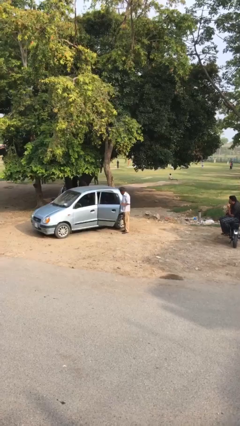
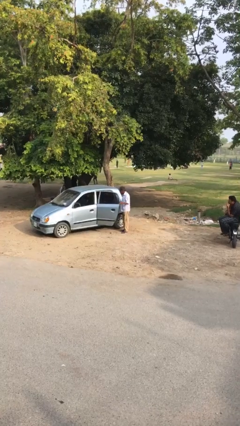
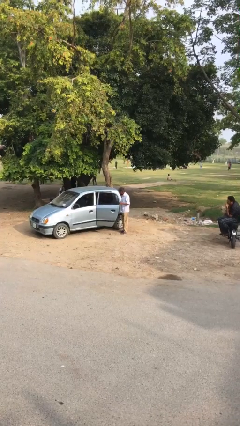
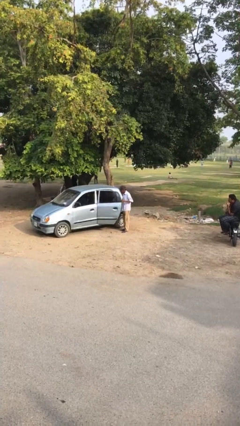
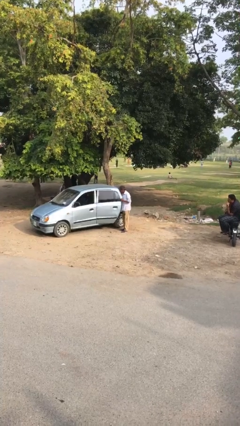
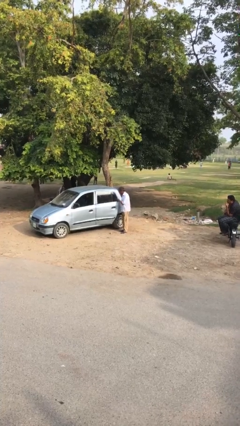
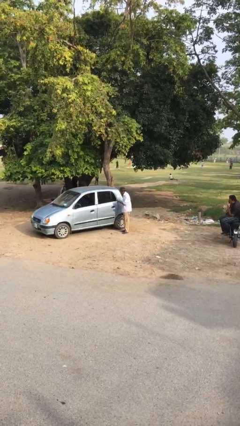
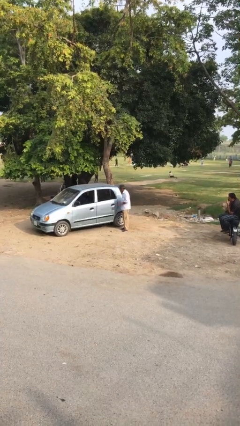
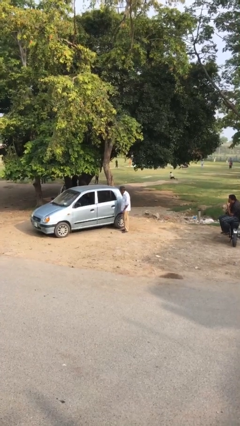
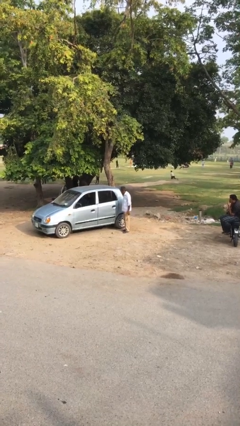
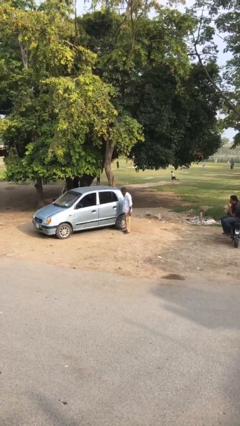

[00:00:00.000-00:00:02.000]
person closes car door

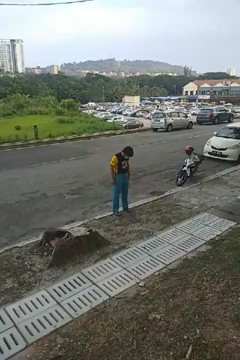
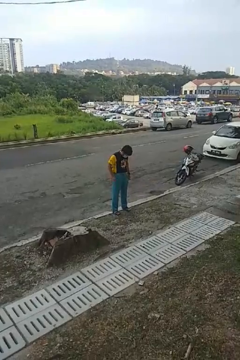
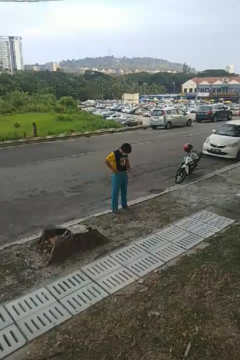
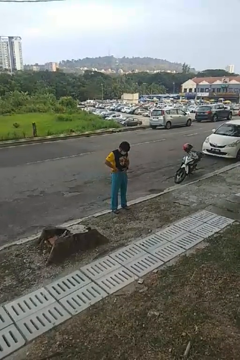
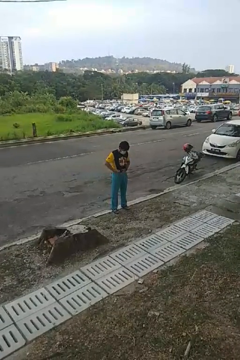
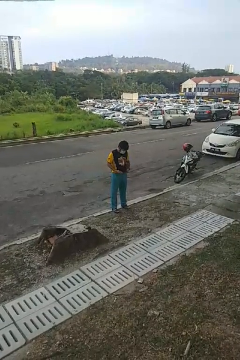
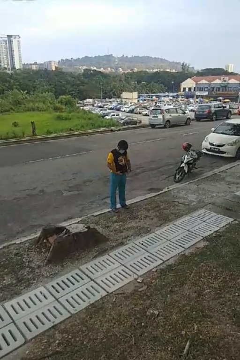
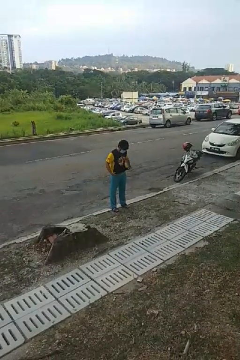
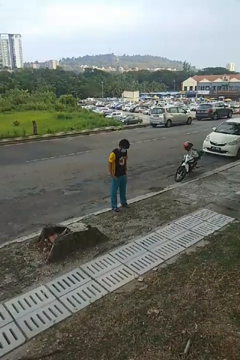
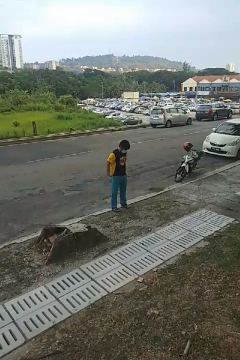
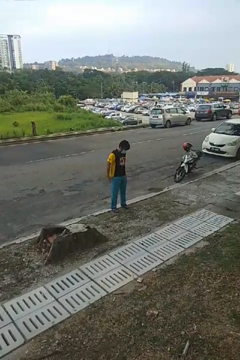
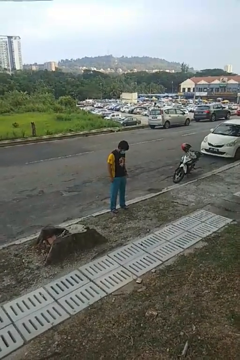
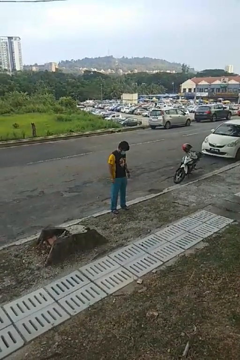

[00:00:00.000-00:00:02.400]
person untucks shirt

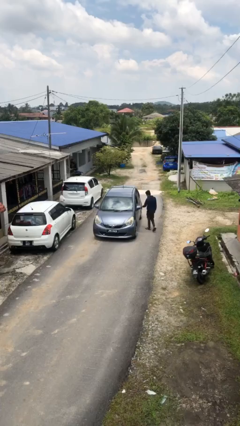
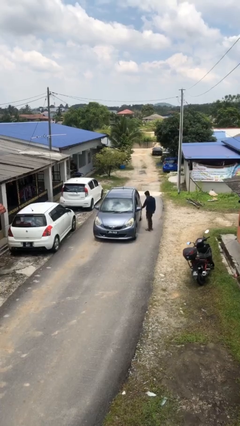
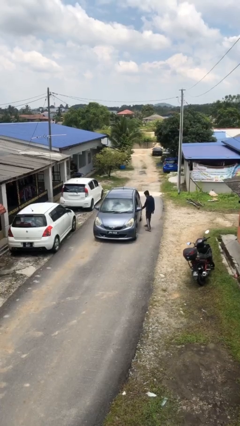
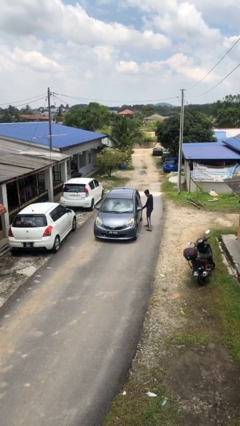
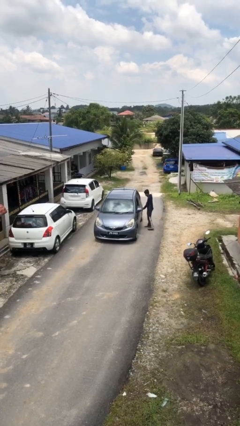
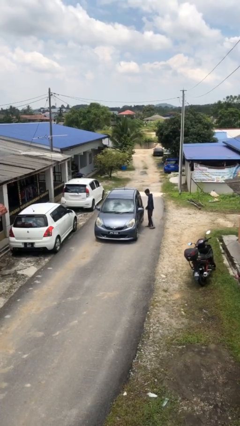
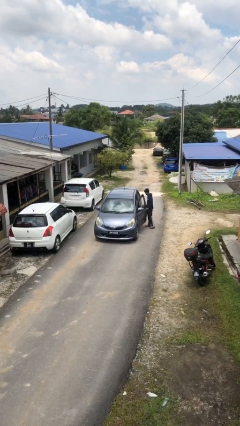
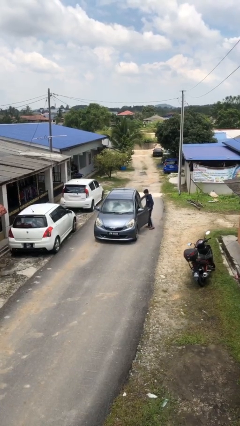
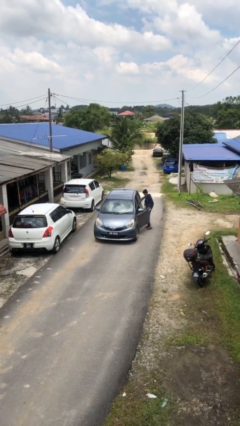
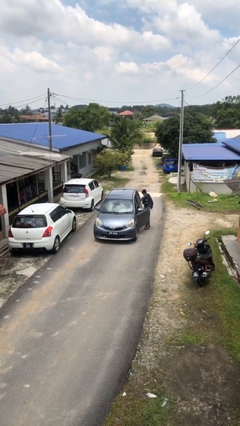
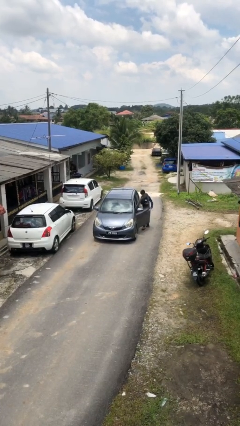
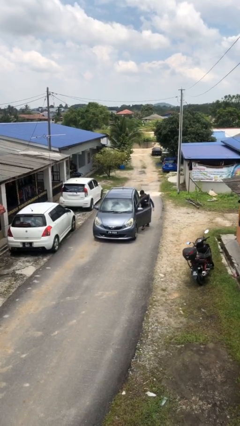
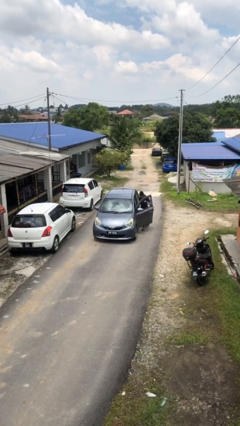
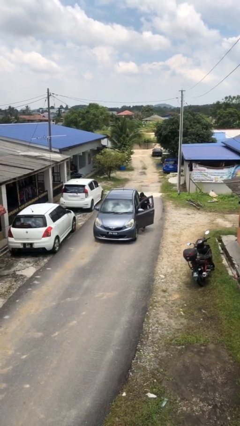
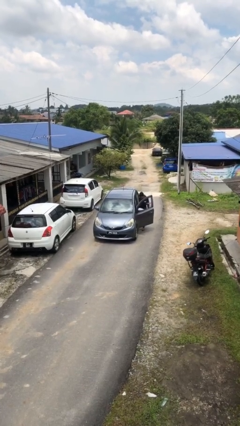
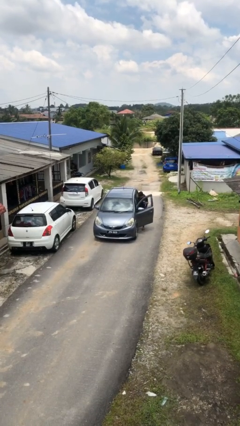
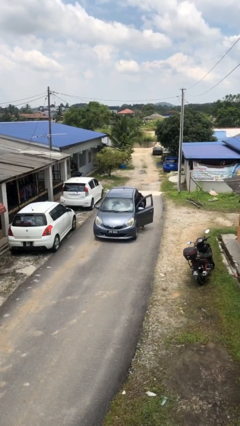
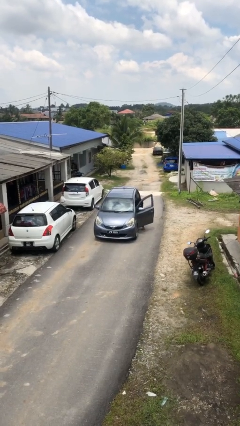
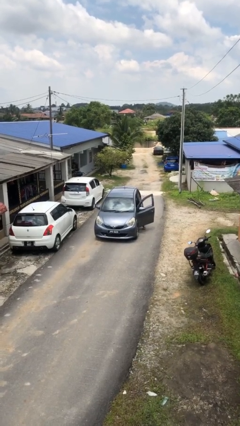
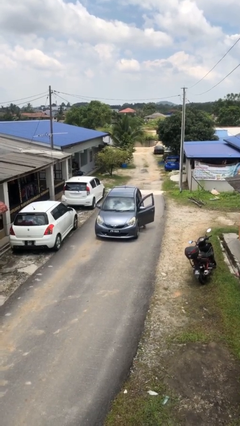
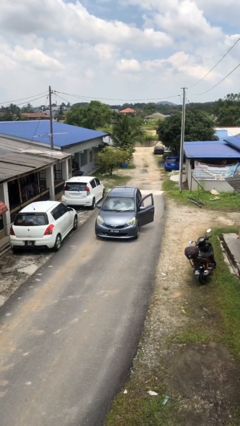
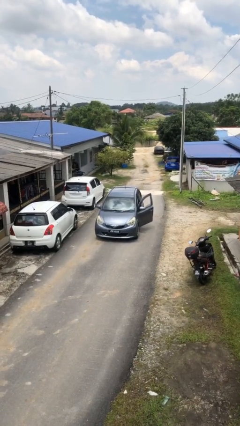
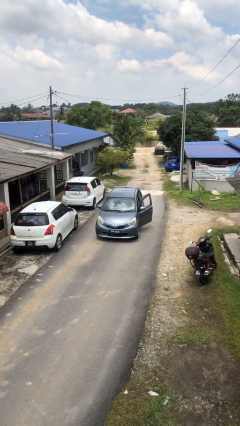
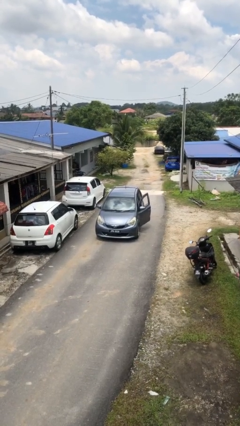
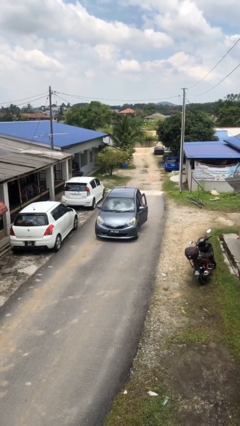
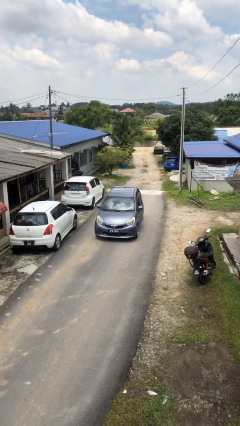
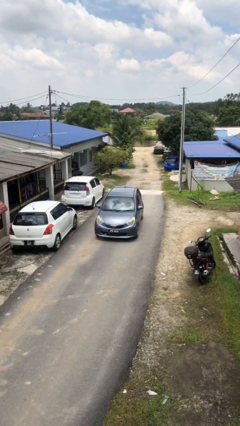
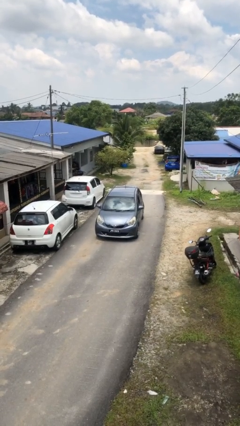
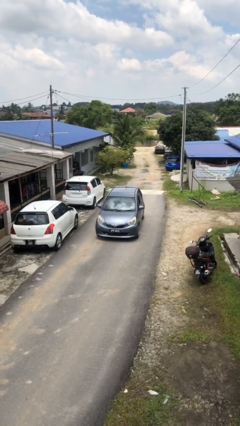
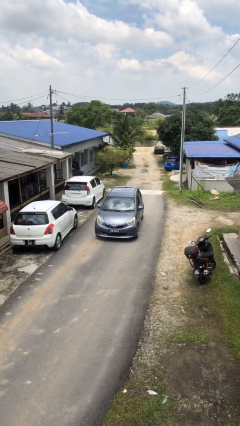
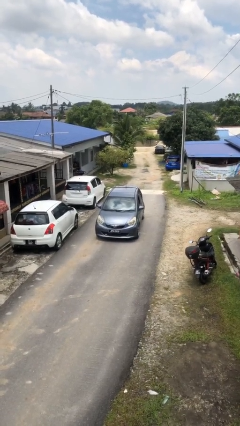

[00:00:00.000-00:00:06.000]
car picks up person

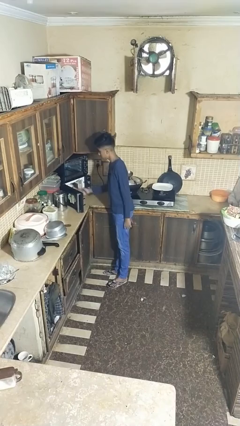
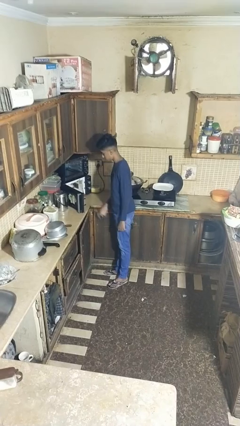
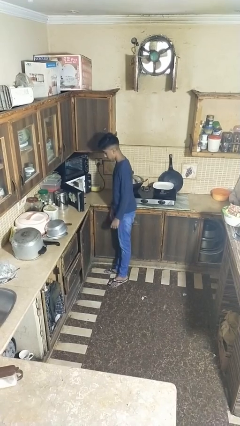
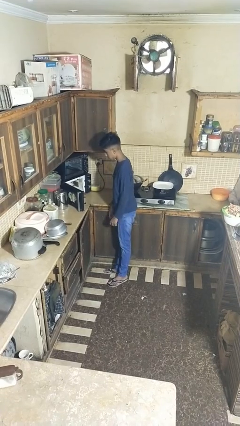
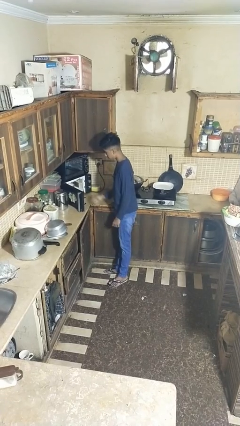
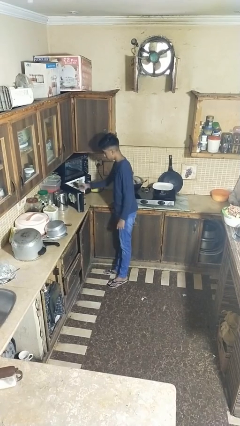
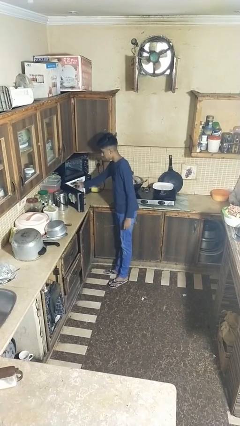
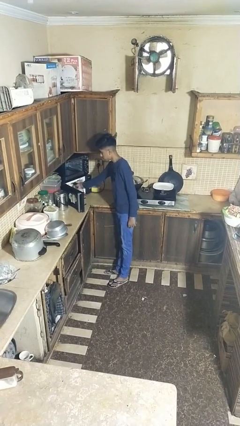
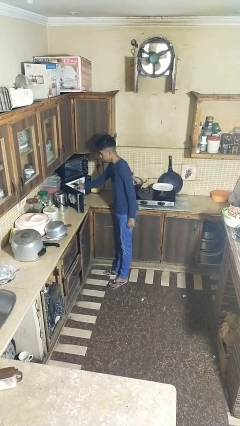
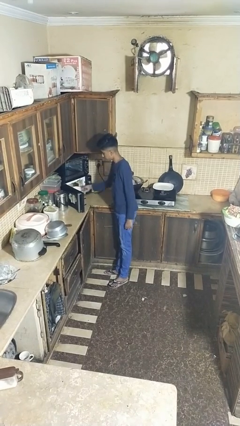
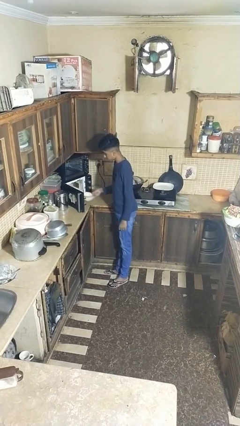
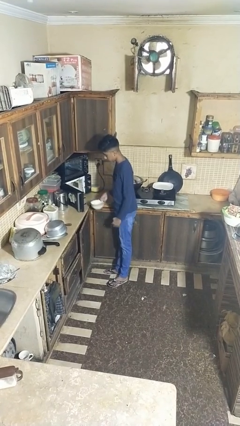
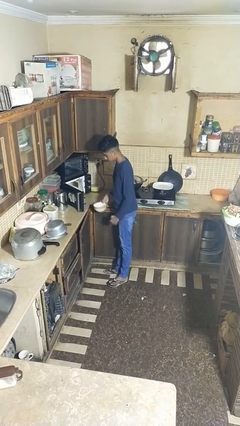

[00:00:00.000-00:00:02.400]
person takes object from microwave

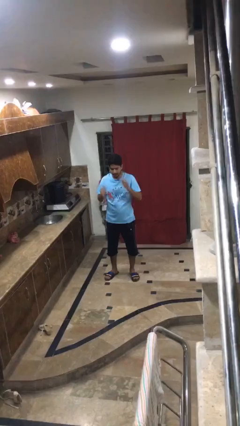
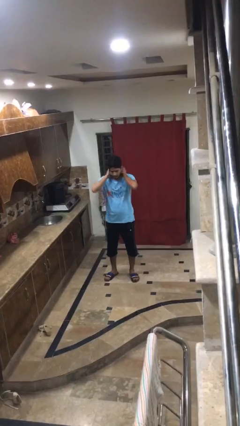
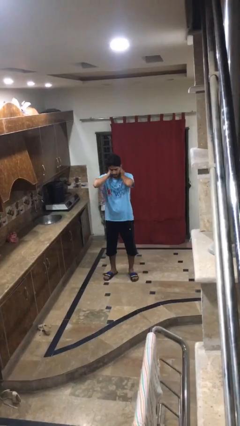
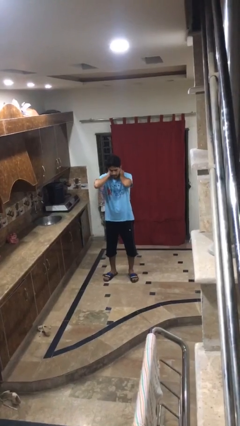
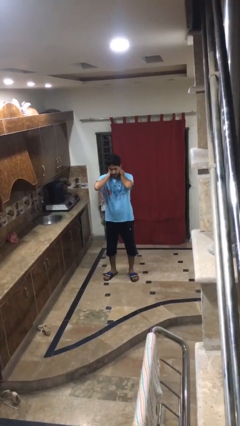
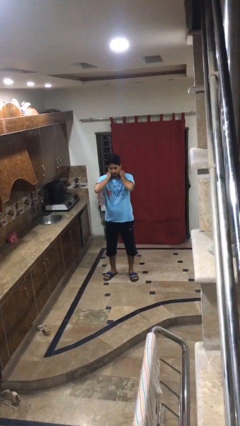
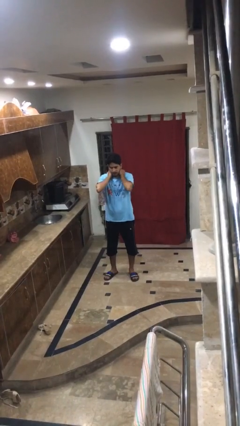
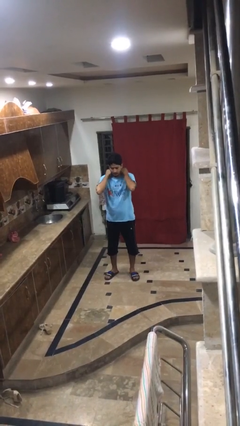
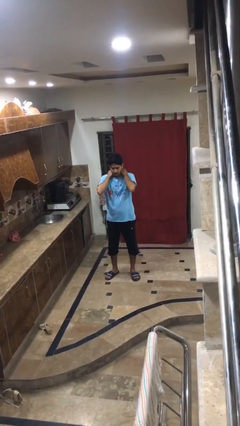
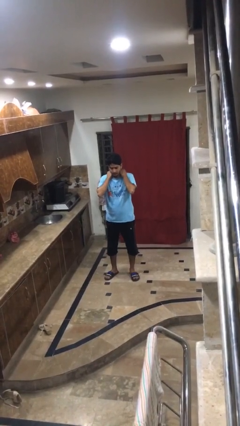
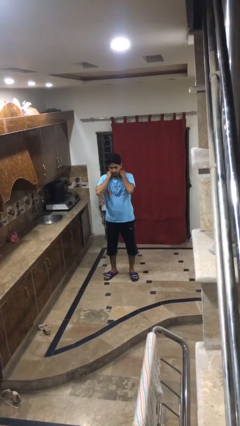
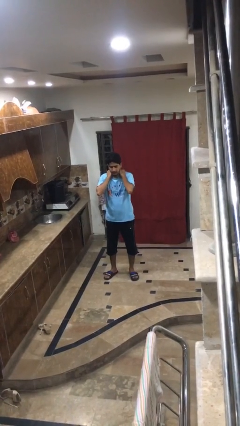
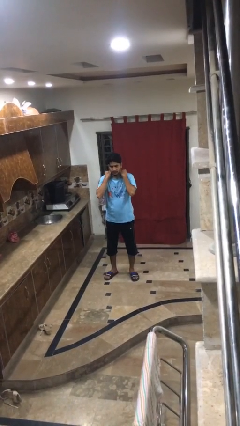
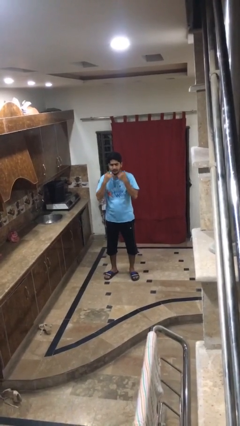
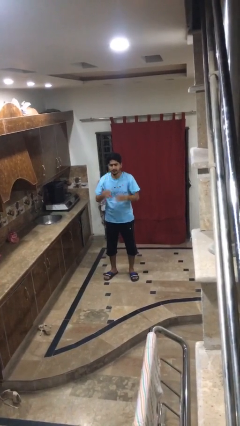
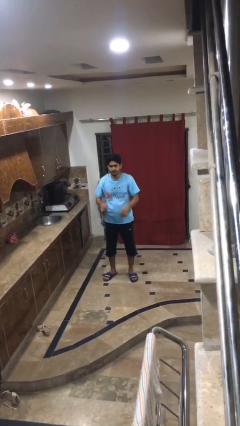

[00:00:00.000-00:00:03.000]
person rubs neck

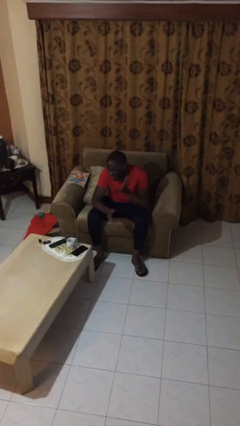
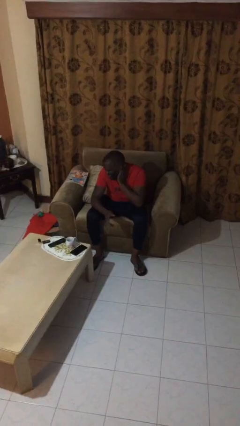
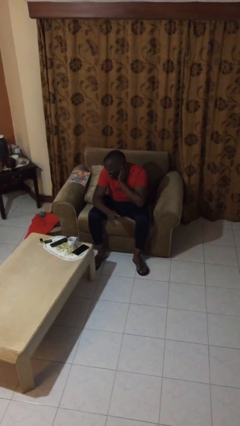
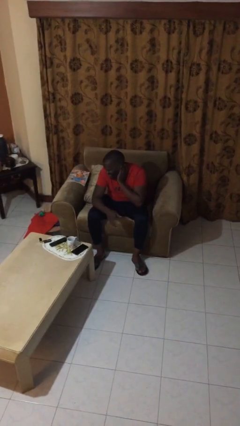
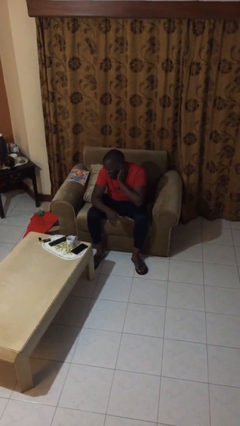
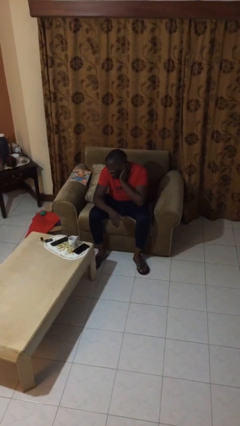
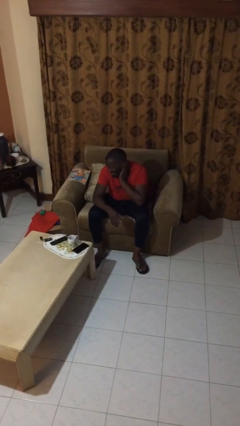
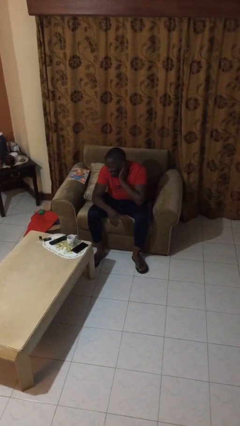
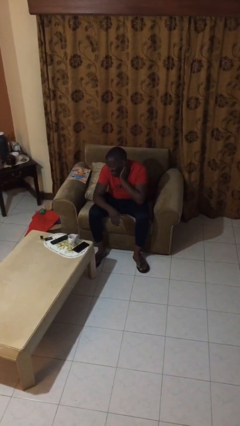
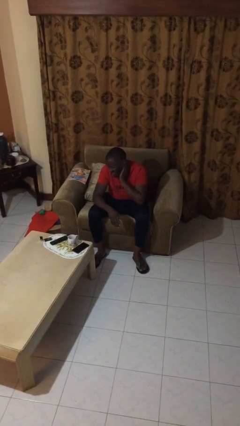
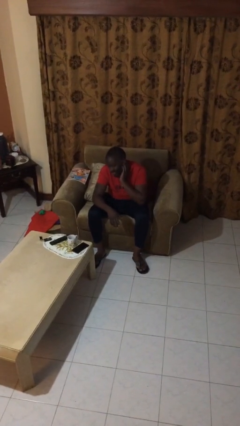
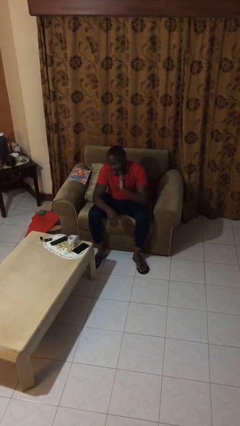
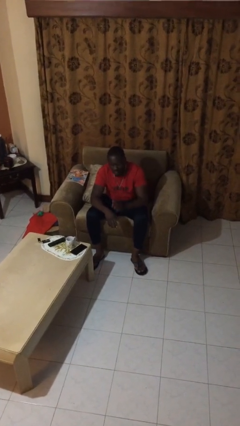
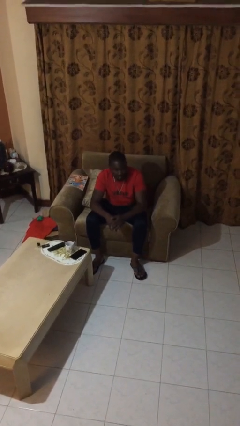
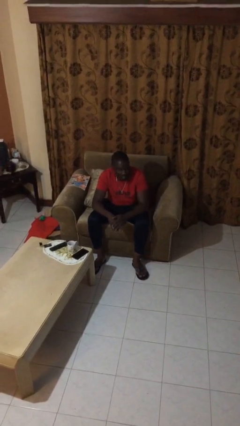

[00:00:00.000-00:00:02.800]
person swats bug
